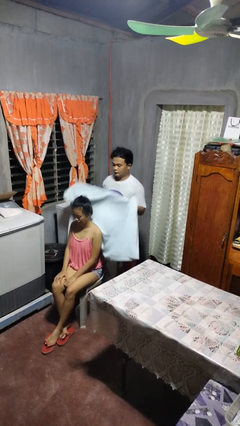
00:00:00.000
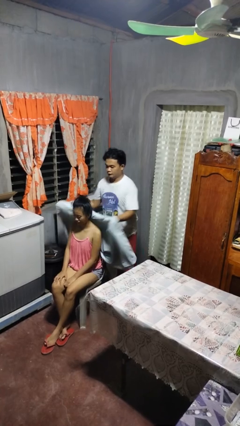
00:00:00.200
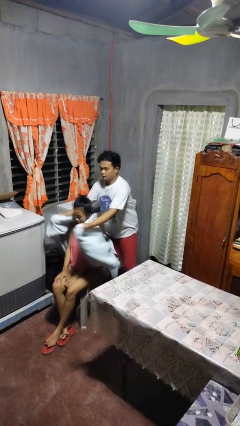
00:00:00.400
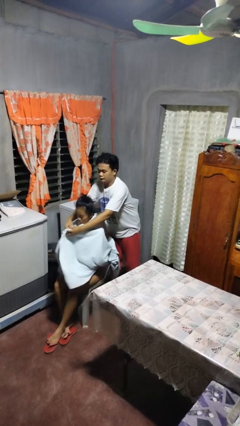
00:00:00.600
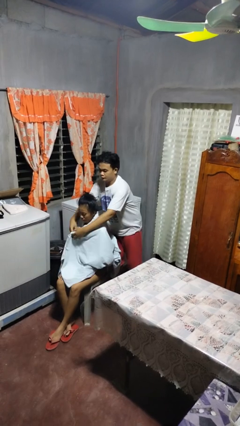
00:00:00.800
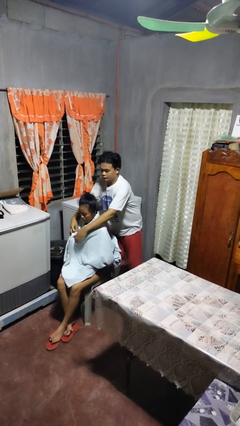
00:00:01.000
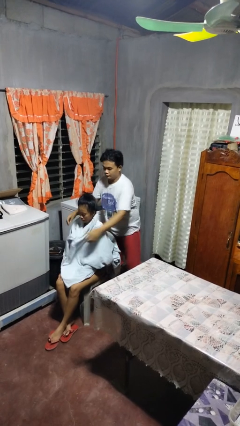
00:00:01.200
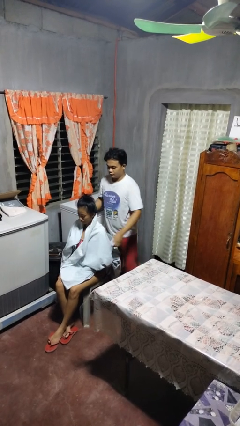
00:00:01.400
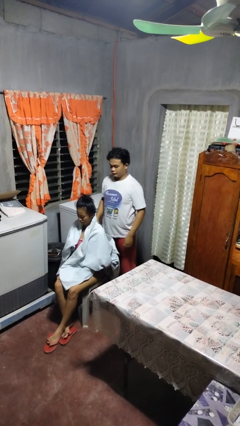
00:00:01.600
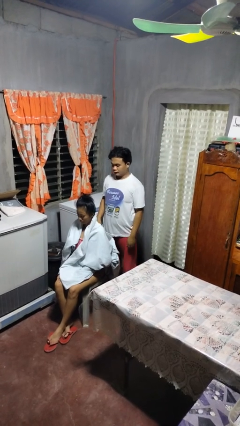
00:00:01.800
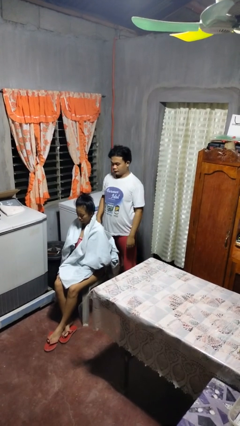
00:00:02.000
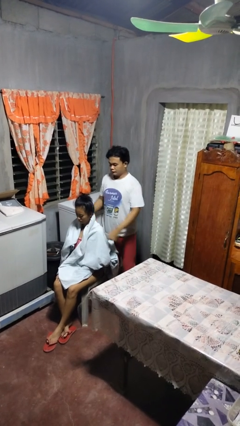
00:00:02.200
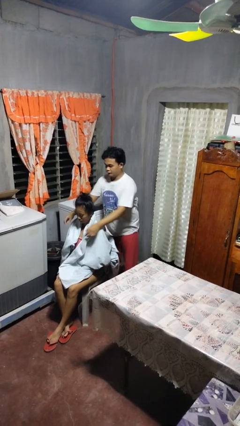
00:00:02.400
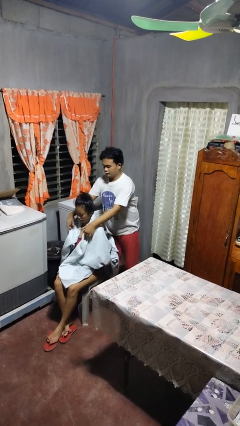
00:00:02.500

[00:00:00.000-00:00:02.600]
person covers friend with blanket

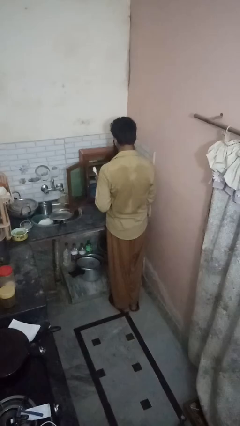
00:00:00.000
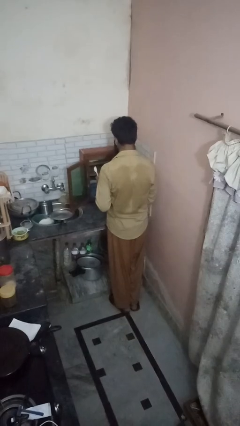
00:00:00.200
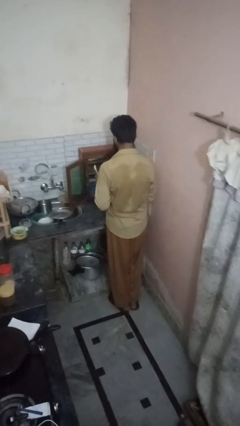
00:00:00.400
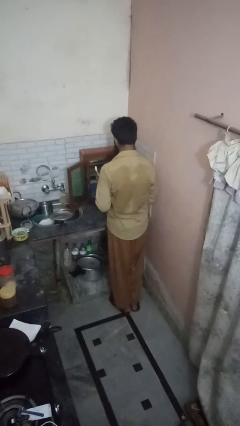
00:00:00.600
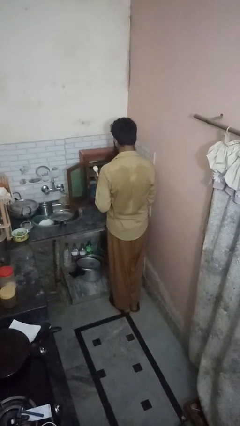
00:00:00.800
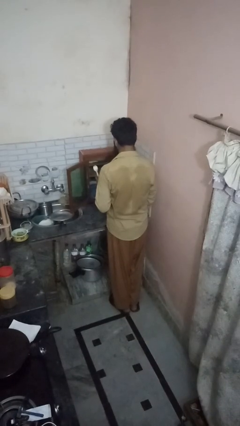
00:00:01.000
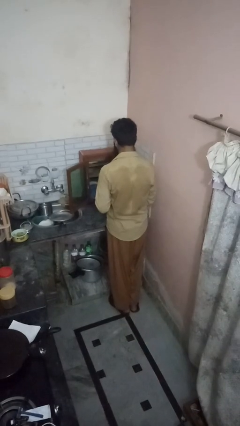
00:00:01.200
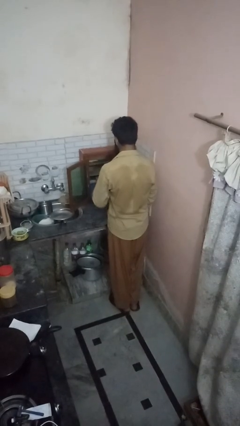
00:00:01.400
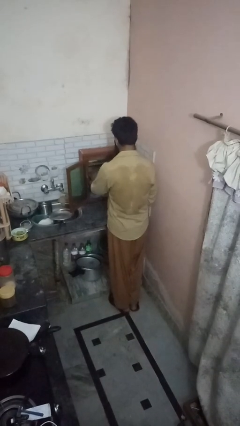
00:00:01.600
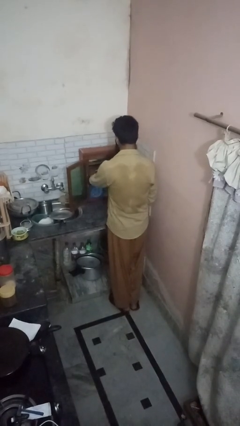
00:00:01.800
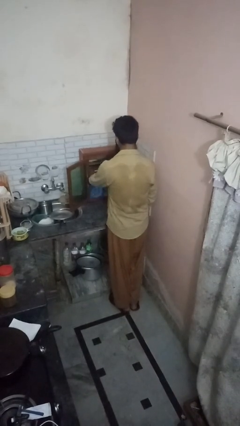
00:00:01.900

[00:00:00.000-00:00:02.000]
person takes object from cabinet

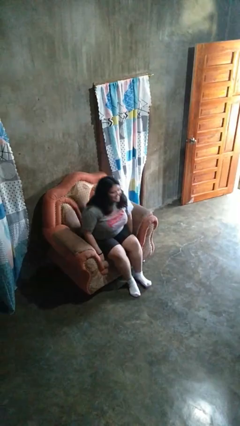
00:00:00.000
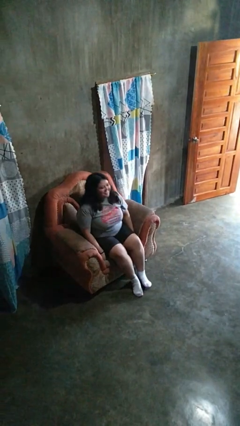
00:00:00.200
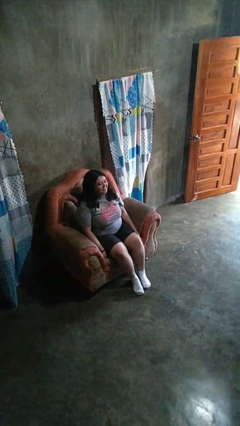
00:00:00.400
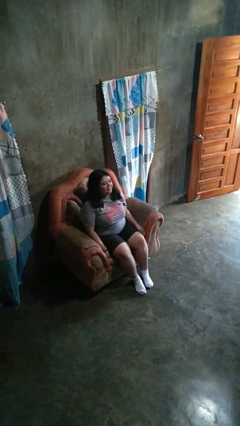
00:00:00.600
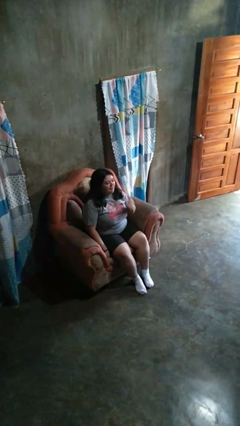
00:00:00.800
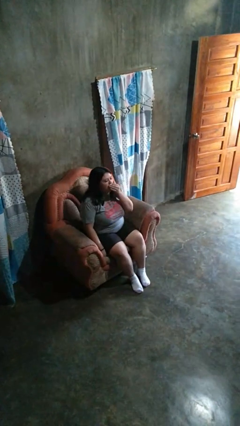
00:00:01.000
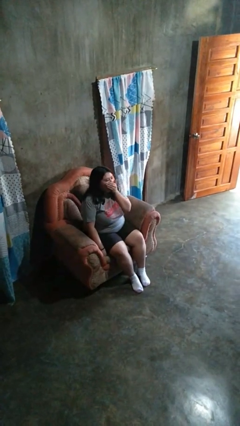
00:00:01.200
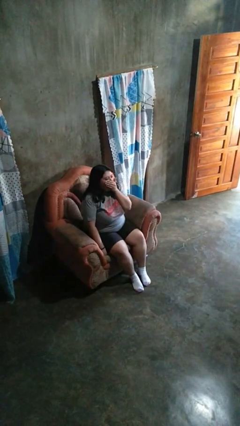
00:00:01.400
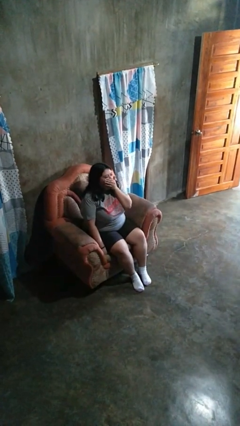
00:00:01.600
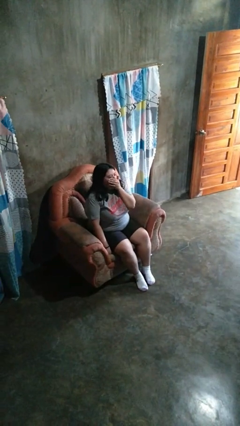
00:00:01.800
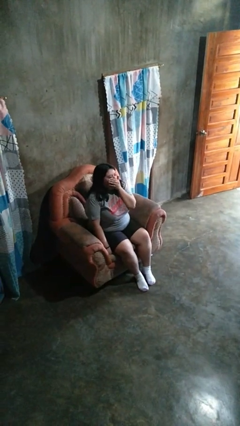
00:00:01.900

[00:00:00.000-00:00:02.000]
person yawns

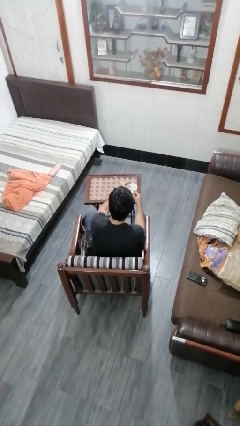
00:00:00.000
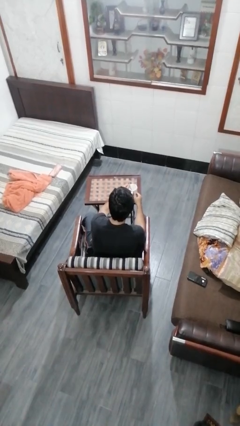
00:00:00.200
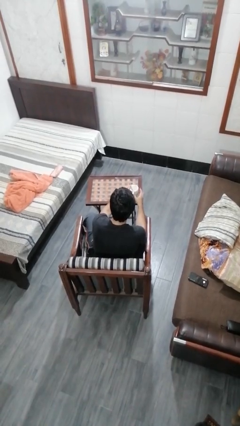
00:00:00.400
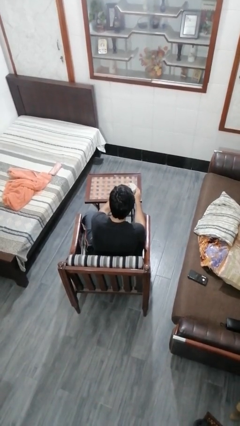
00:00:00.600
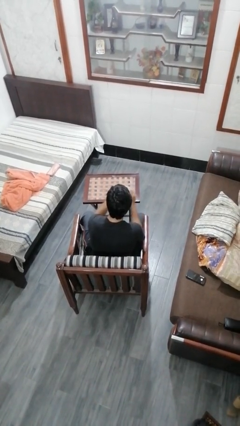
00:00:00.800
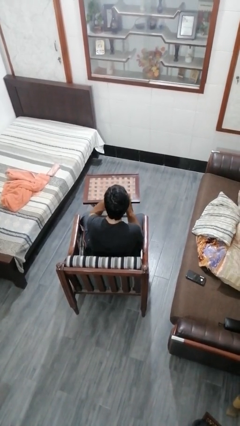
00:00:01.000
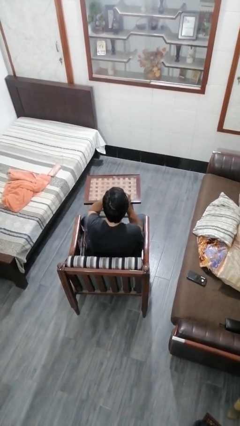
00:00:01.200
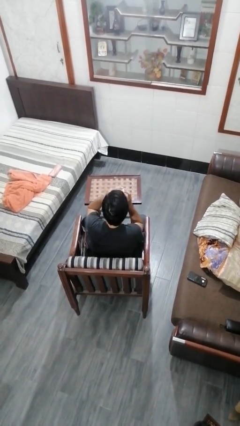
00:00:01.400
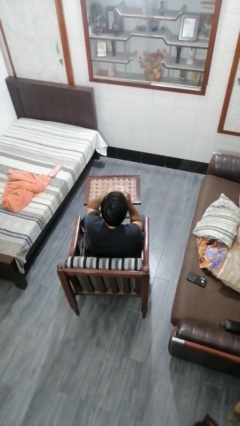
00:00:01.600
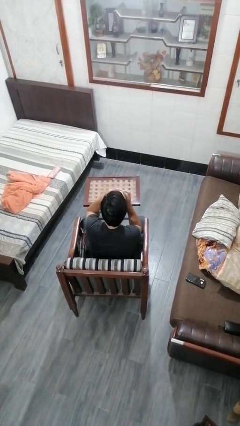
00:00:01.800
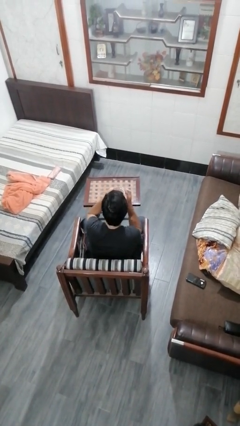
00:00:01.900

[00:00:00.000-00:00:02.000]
person drinks from mug

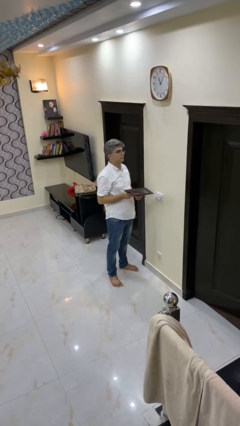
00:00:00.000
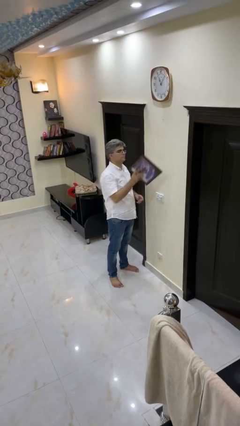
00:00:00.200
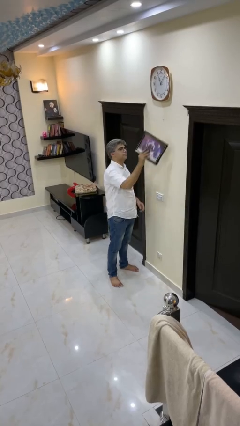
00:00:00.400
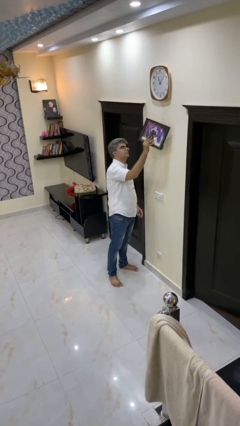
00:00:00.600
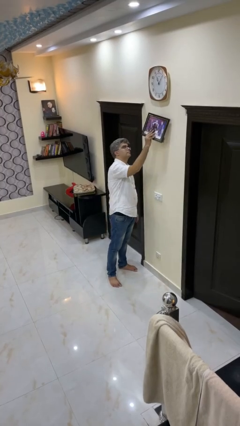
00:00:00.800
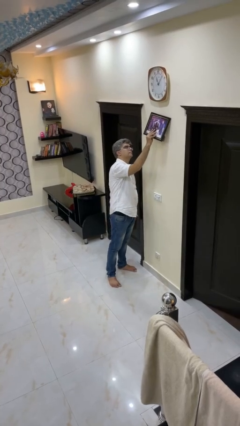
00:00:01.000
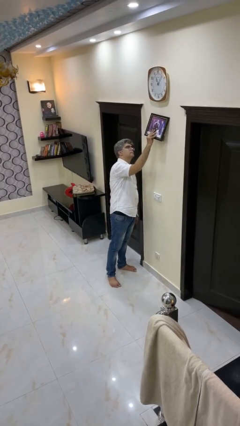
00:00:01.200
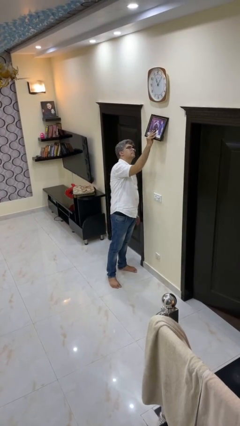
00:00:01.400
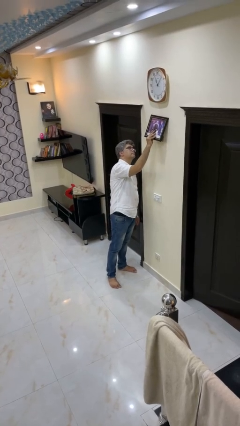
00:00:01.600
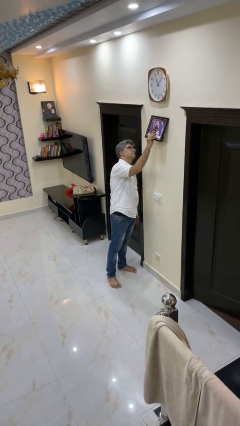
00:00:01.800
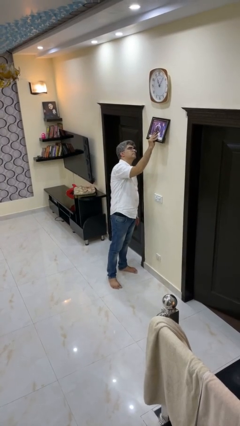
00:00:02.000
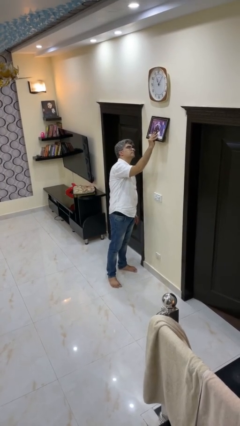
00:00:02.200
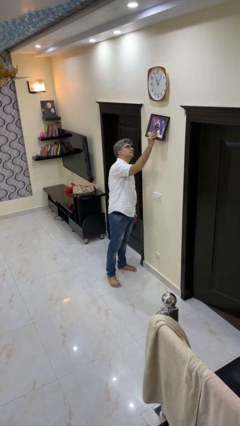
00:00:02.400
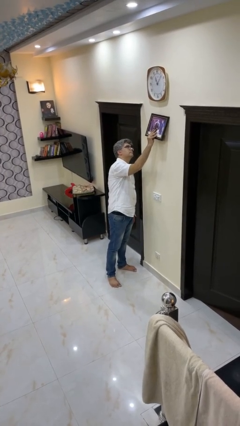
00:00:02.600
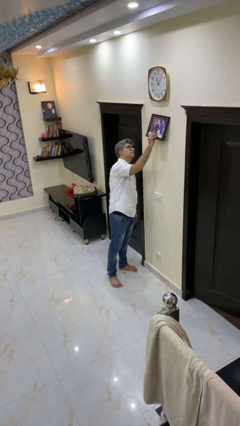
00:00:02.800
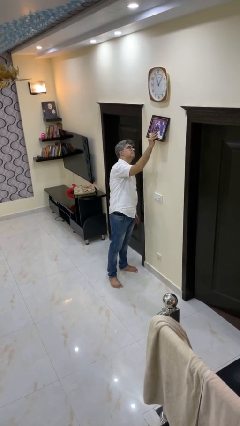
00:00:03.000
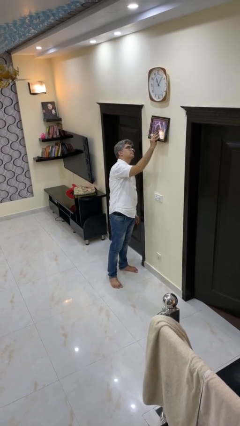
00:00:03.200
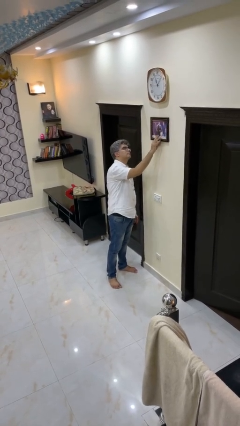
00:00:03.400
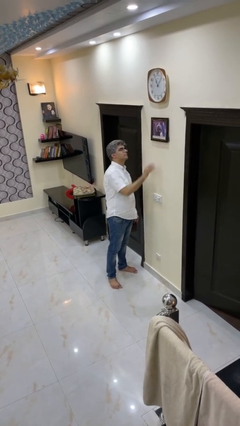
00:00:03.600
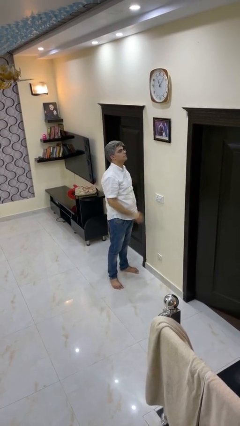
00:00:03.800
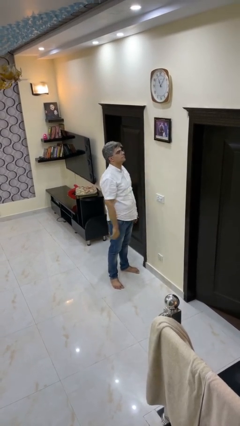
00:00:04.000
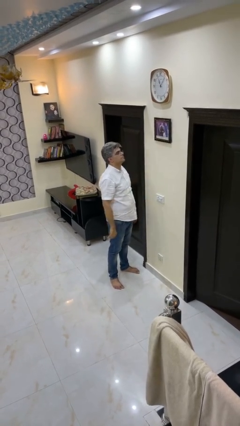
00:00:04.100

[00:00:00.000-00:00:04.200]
person puts up picture frame

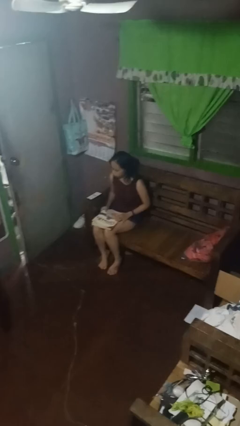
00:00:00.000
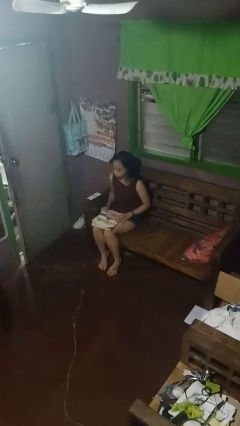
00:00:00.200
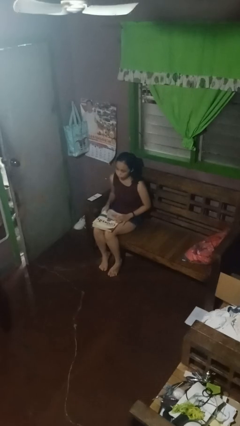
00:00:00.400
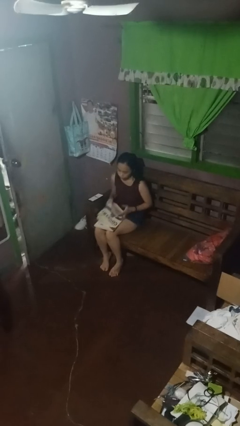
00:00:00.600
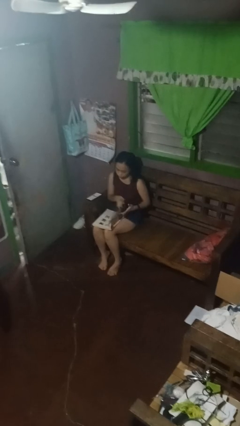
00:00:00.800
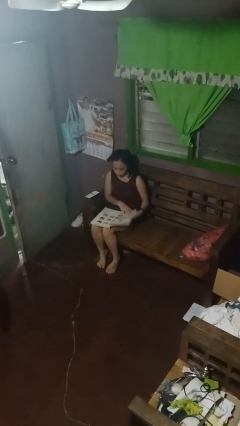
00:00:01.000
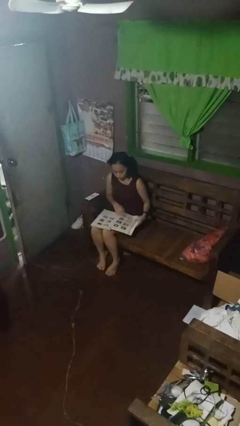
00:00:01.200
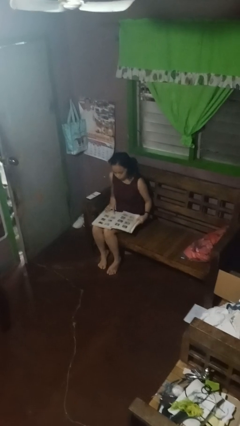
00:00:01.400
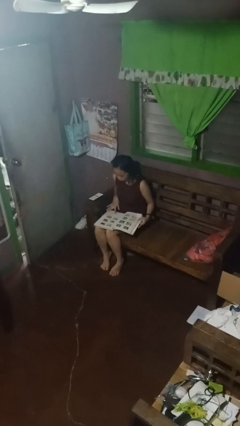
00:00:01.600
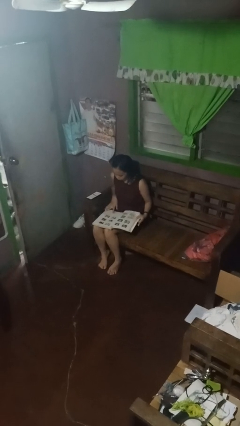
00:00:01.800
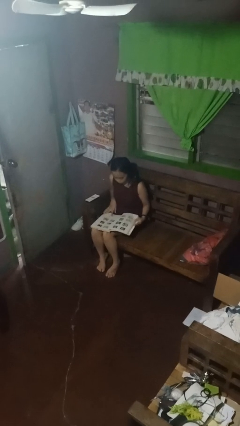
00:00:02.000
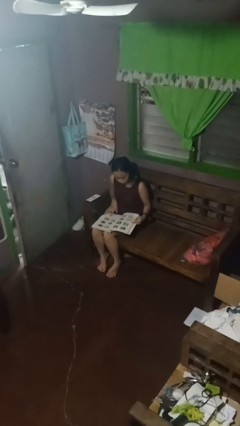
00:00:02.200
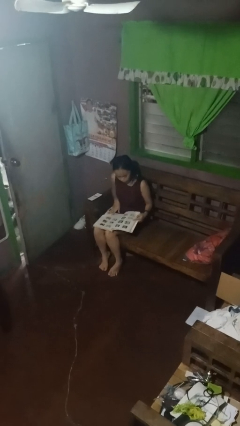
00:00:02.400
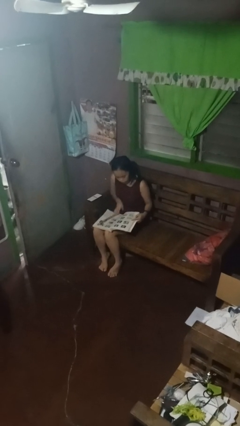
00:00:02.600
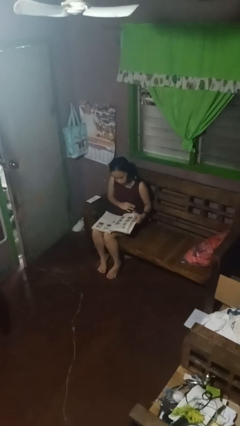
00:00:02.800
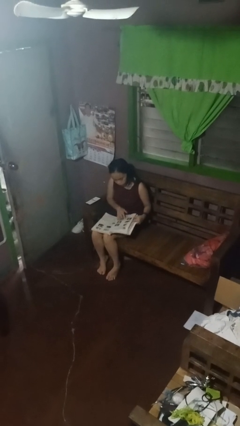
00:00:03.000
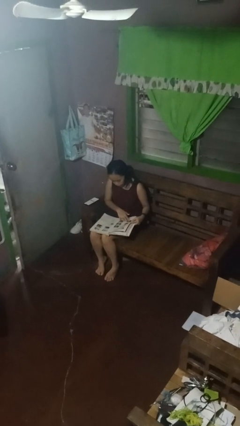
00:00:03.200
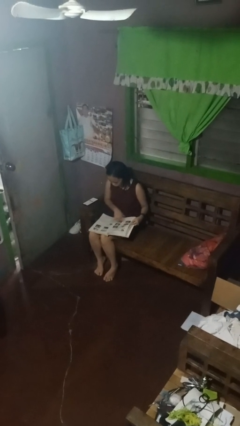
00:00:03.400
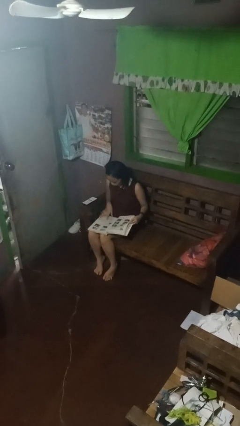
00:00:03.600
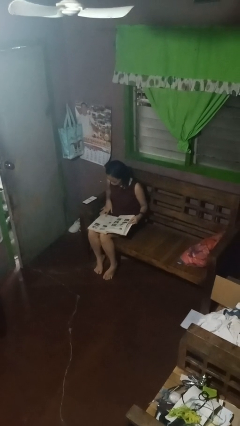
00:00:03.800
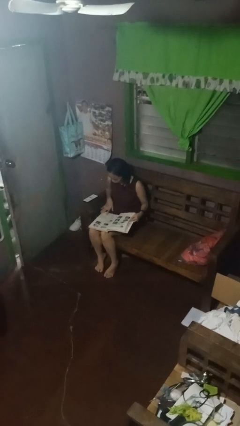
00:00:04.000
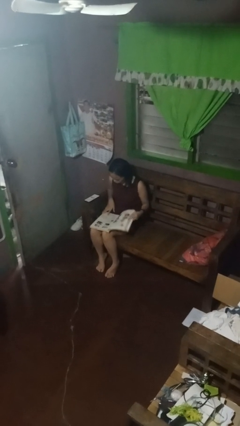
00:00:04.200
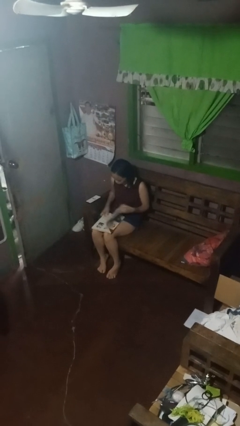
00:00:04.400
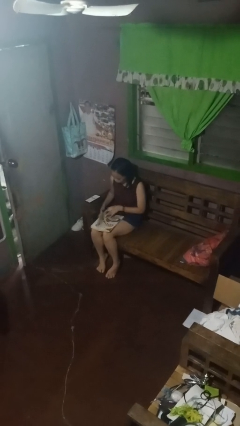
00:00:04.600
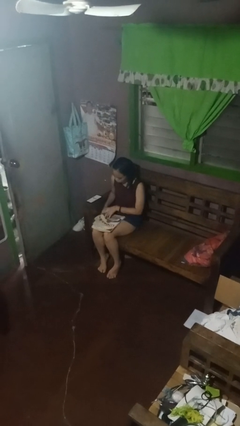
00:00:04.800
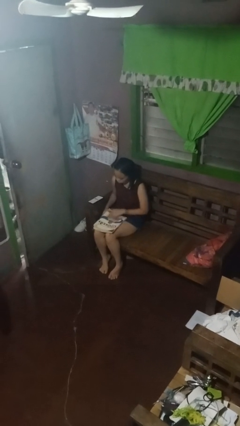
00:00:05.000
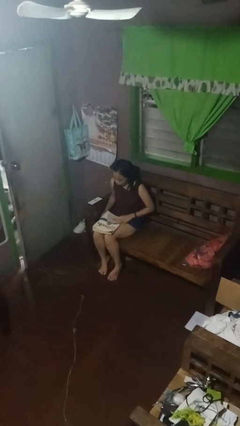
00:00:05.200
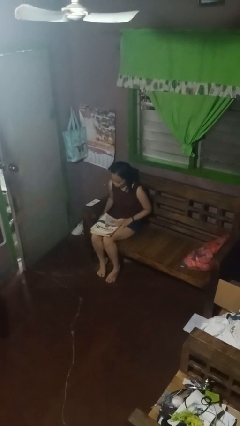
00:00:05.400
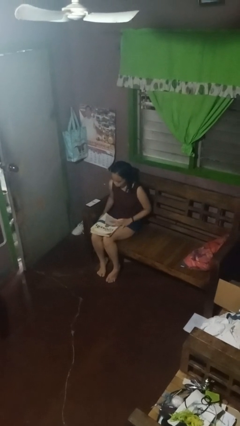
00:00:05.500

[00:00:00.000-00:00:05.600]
person reads book
